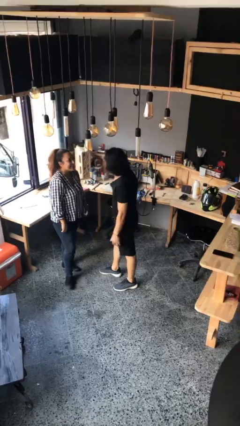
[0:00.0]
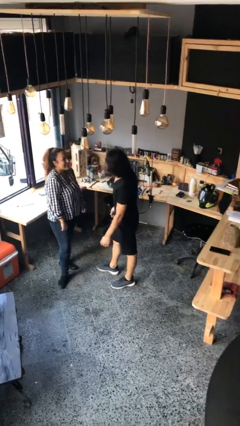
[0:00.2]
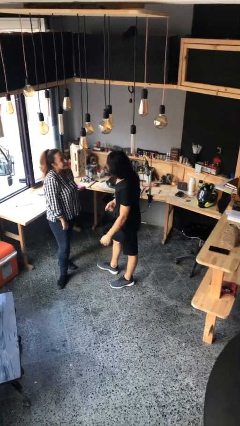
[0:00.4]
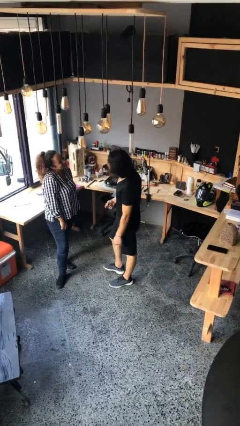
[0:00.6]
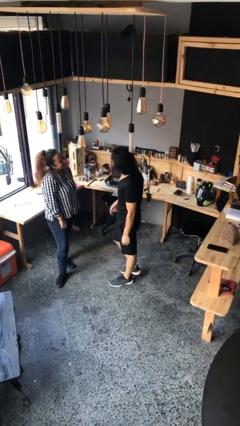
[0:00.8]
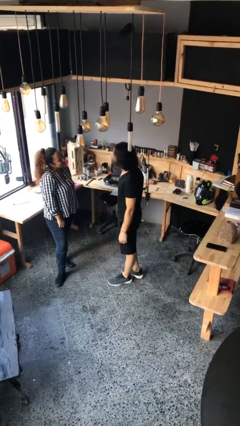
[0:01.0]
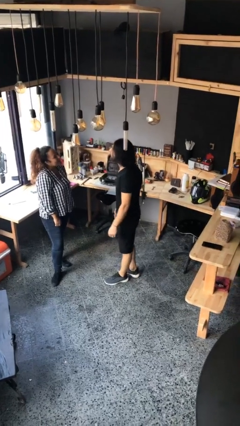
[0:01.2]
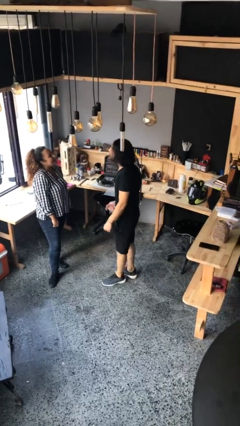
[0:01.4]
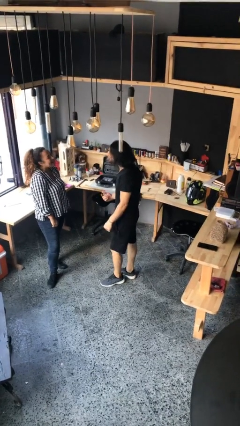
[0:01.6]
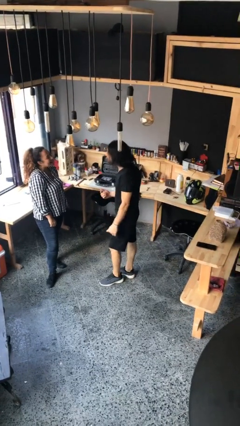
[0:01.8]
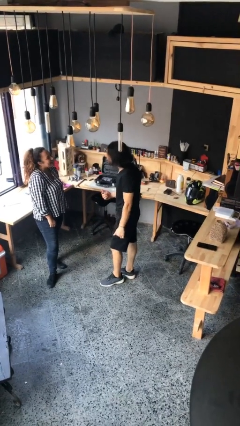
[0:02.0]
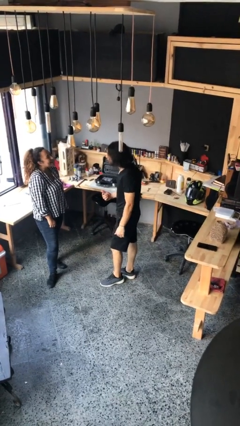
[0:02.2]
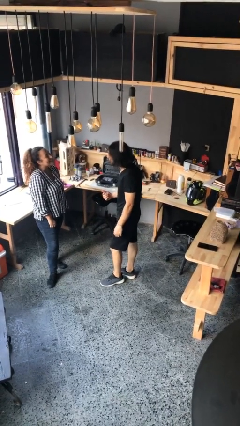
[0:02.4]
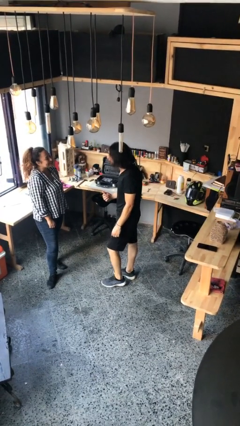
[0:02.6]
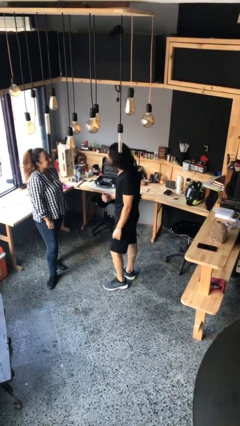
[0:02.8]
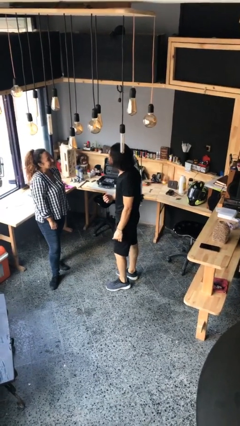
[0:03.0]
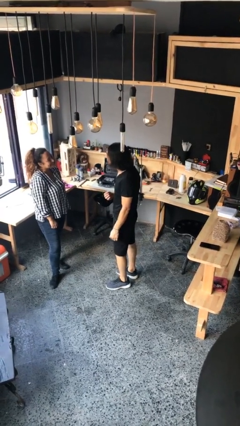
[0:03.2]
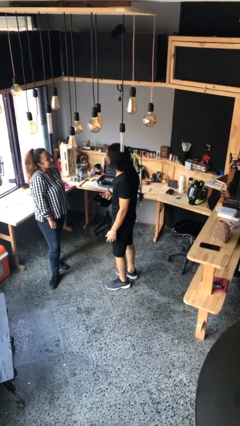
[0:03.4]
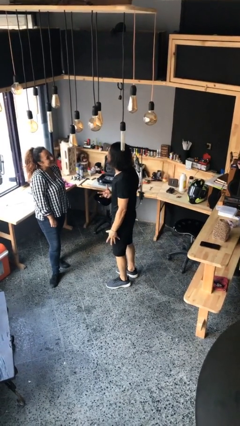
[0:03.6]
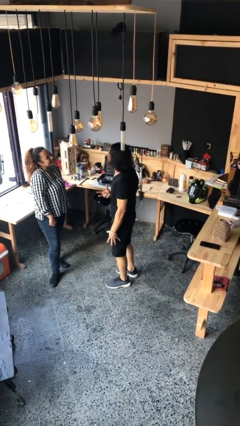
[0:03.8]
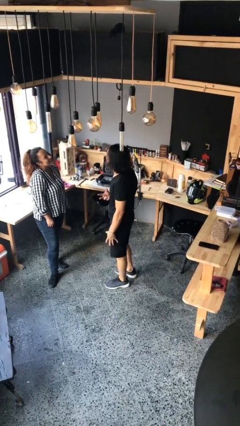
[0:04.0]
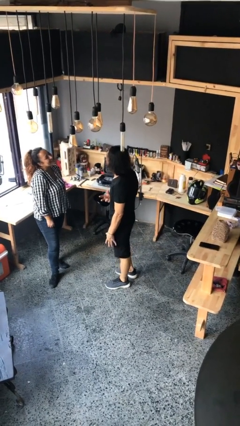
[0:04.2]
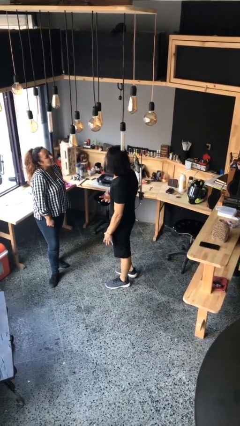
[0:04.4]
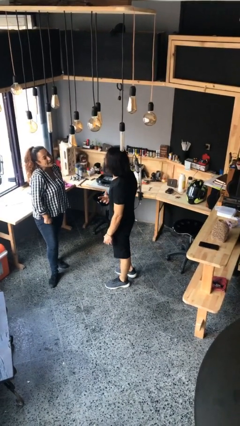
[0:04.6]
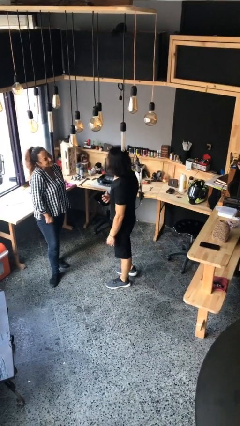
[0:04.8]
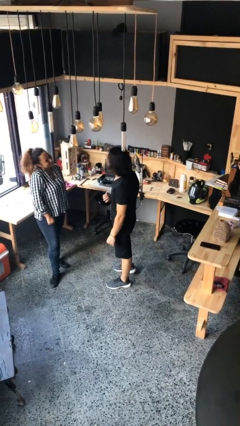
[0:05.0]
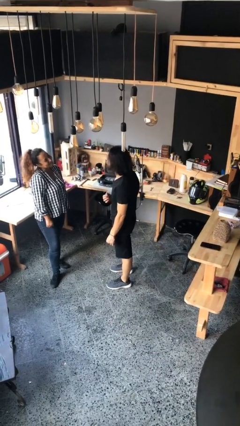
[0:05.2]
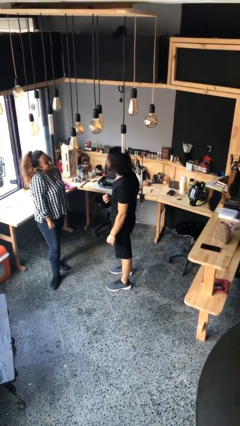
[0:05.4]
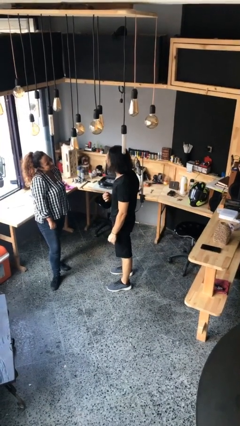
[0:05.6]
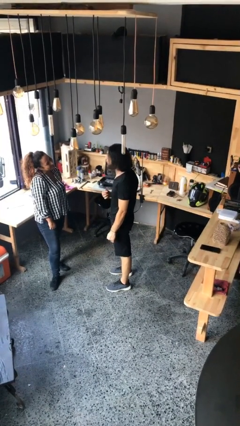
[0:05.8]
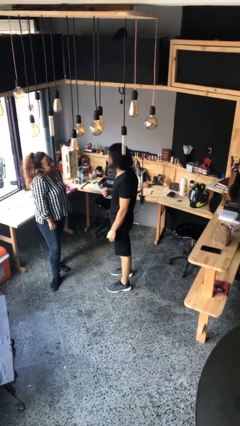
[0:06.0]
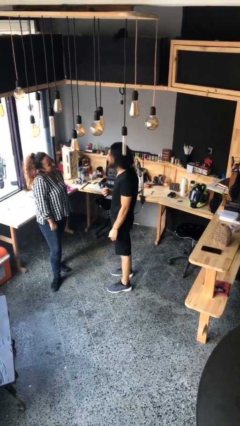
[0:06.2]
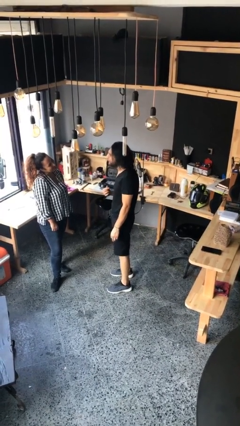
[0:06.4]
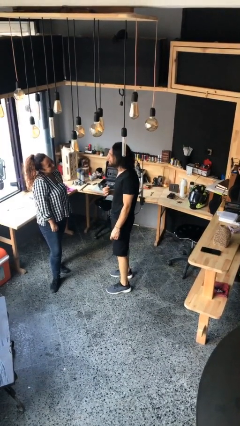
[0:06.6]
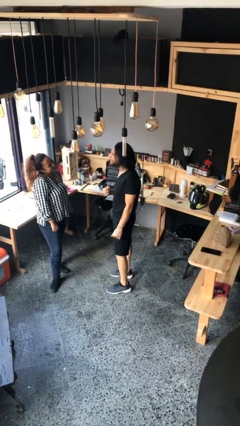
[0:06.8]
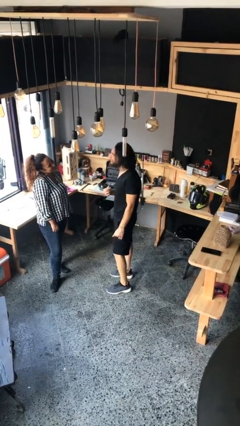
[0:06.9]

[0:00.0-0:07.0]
person talks to person

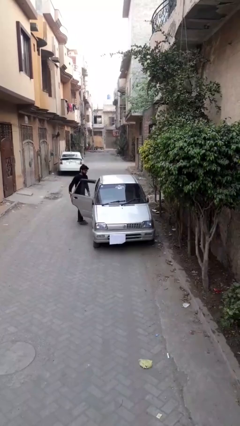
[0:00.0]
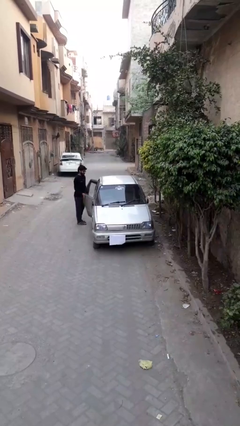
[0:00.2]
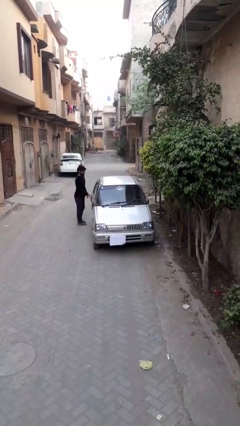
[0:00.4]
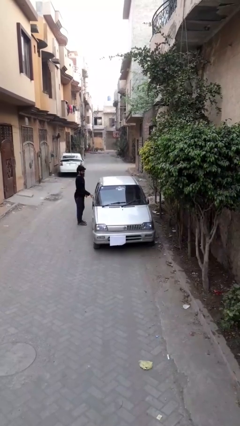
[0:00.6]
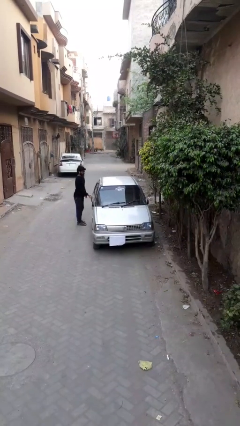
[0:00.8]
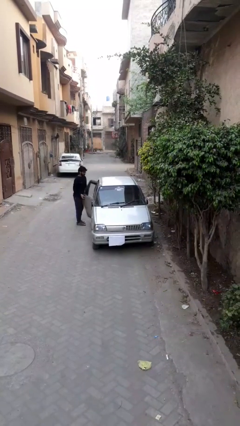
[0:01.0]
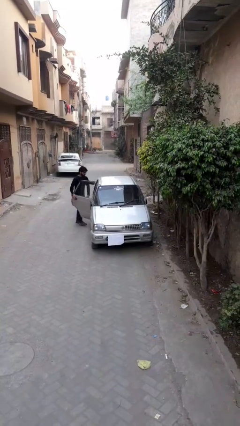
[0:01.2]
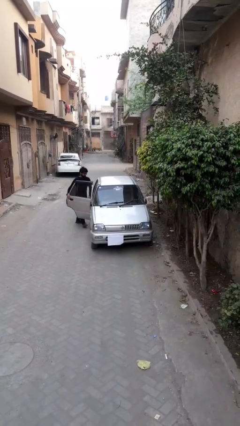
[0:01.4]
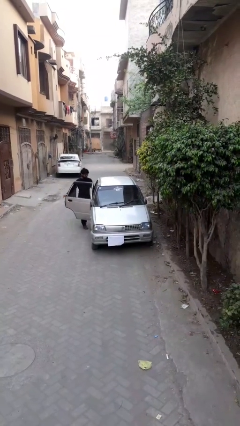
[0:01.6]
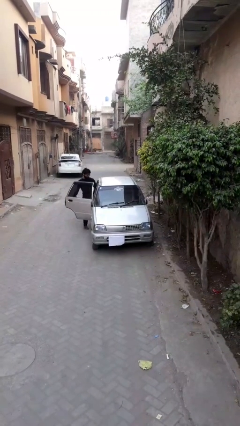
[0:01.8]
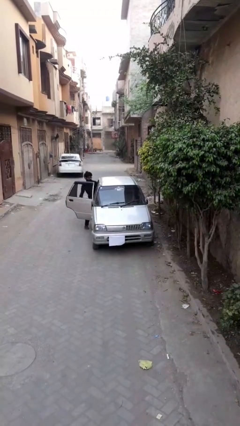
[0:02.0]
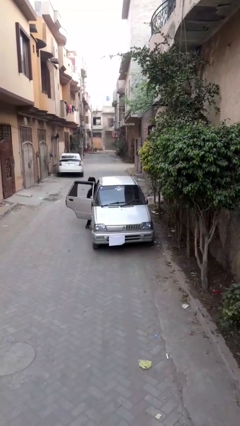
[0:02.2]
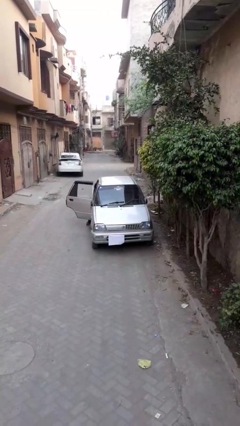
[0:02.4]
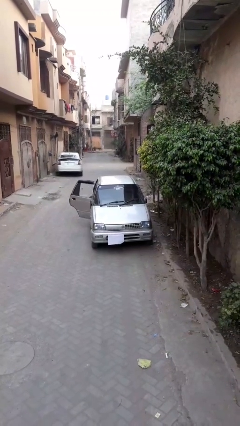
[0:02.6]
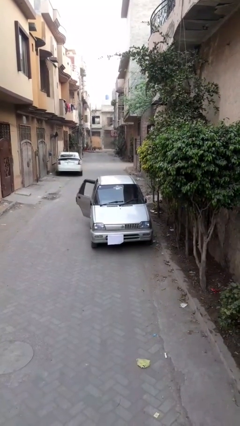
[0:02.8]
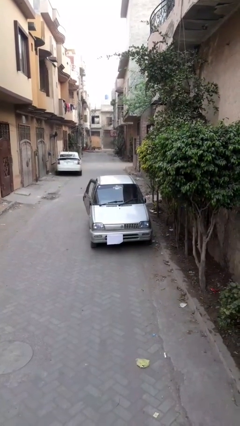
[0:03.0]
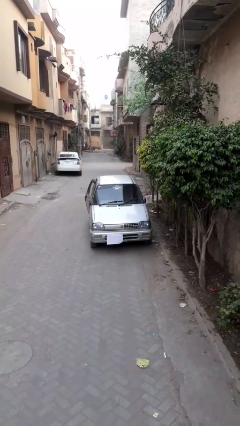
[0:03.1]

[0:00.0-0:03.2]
car picks up person

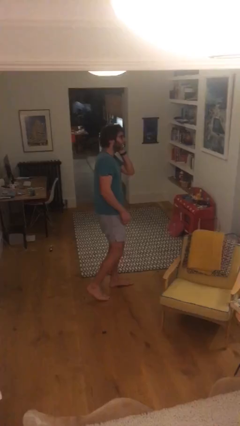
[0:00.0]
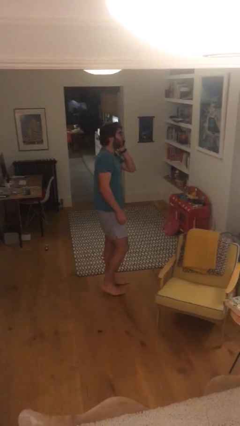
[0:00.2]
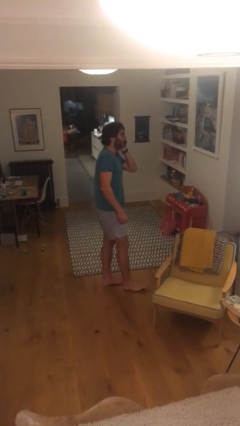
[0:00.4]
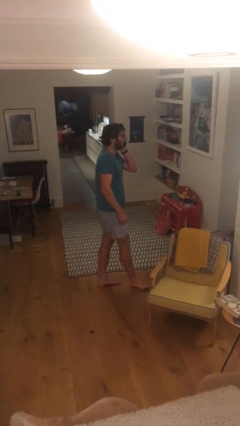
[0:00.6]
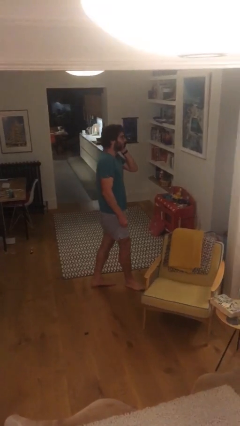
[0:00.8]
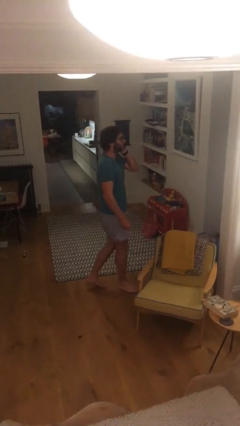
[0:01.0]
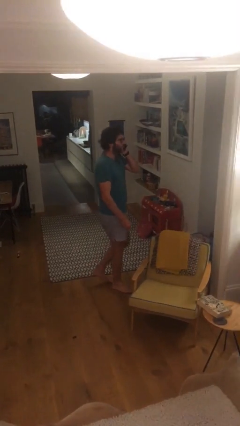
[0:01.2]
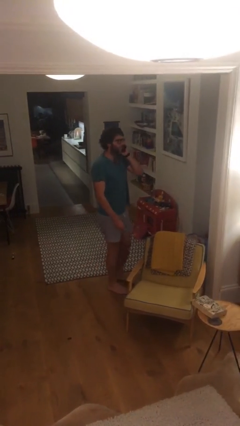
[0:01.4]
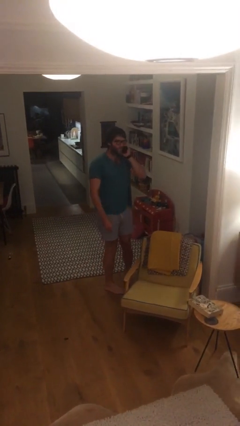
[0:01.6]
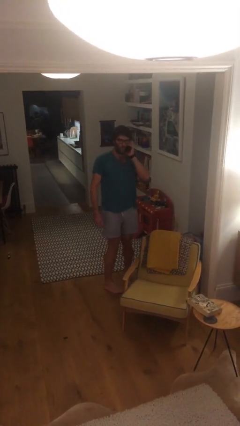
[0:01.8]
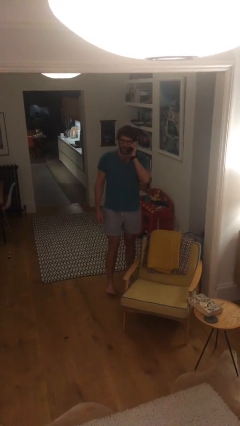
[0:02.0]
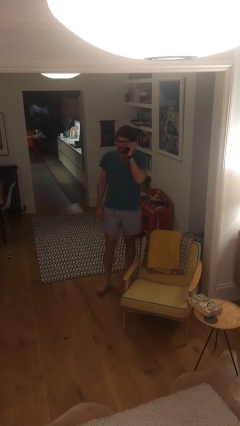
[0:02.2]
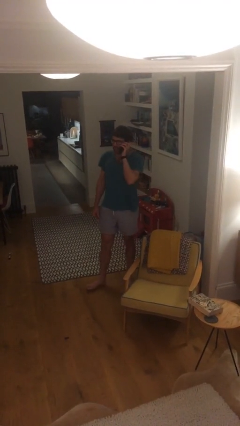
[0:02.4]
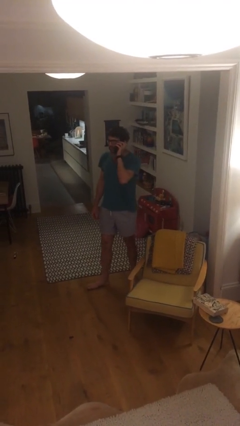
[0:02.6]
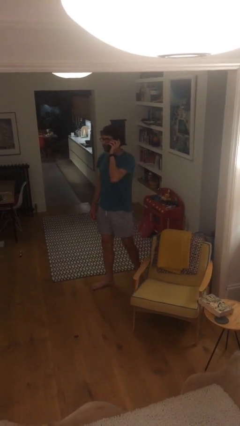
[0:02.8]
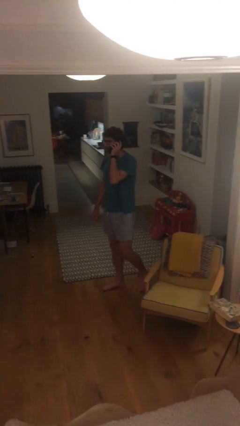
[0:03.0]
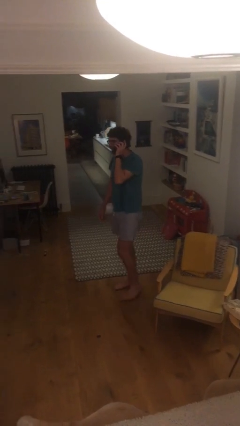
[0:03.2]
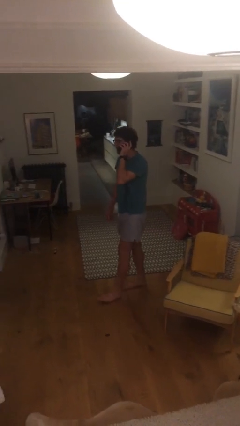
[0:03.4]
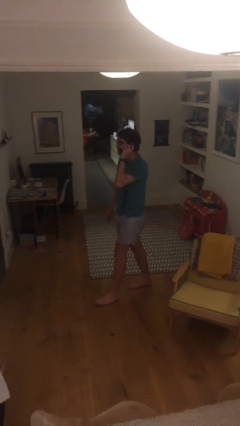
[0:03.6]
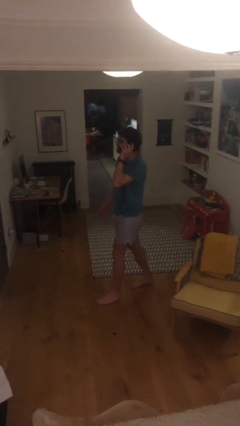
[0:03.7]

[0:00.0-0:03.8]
person talks on phone

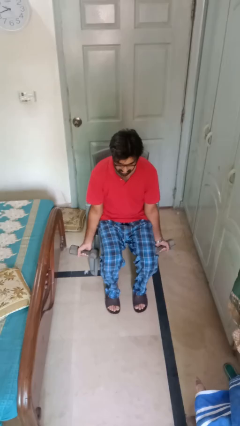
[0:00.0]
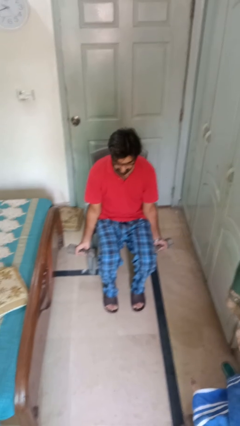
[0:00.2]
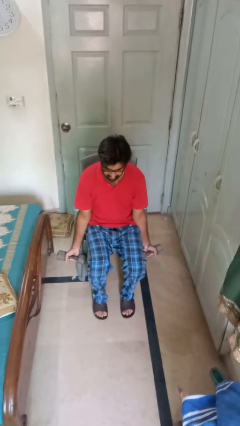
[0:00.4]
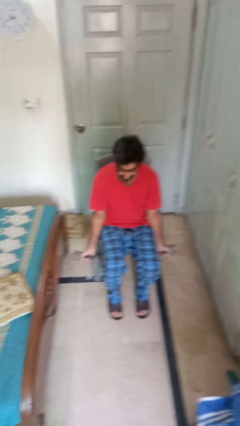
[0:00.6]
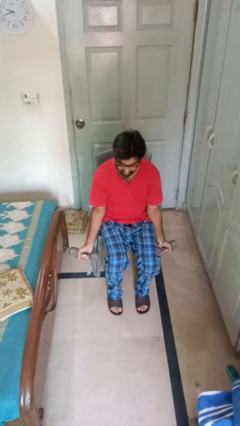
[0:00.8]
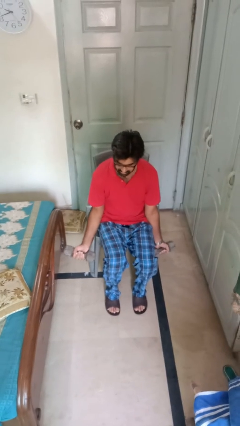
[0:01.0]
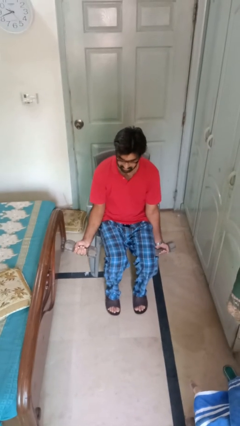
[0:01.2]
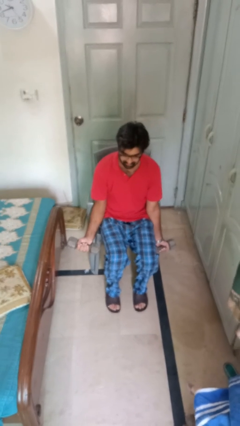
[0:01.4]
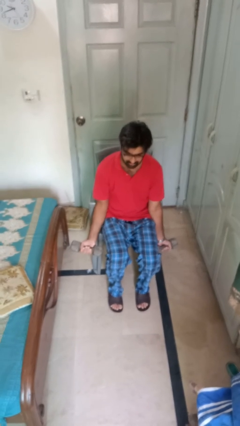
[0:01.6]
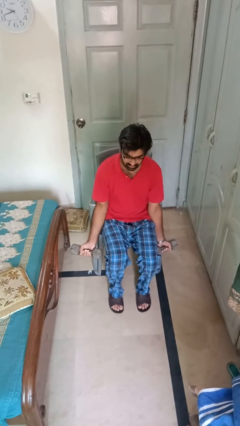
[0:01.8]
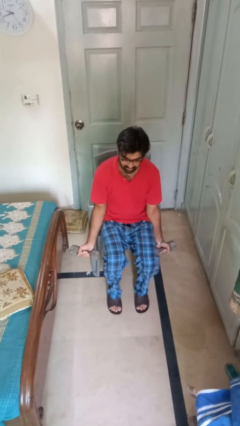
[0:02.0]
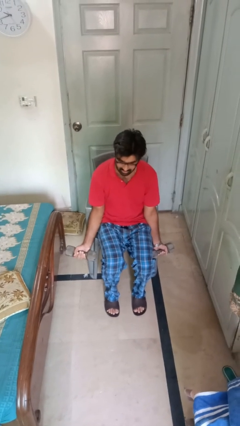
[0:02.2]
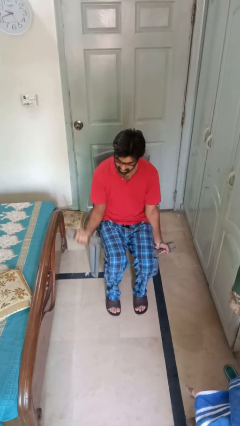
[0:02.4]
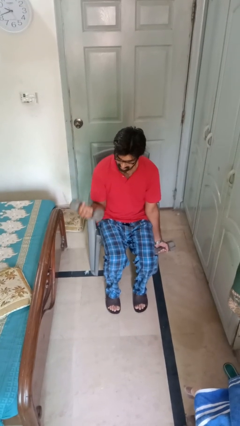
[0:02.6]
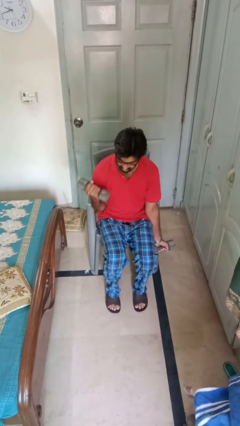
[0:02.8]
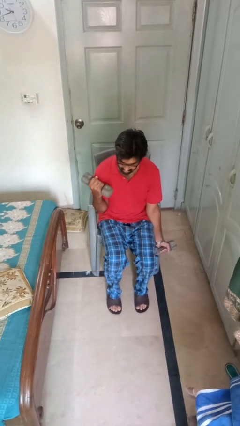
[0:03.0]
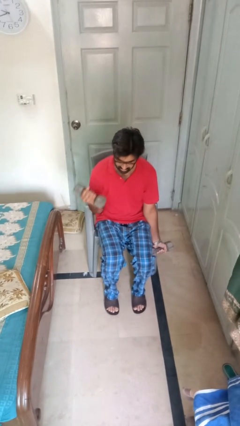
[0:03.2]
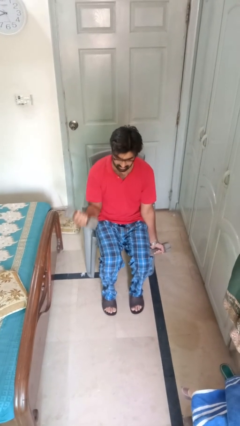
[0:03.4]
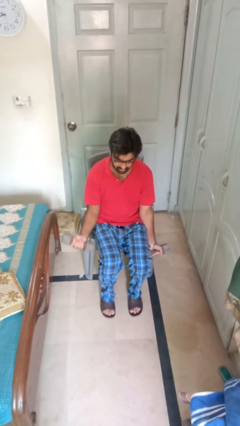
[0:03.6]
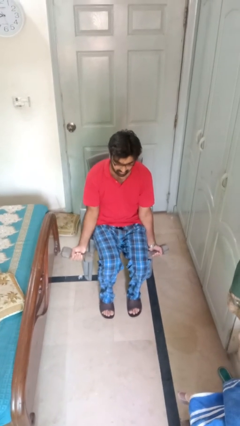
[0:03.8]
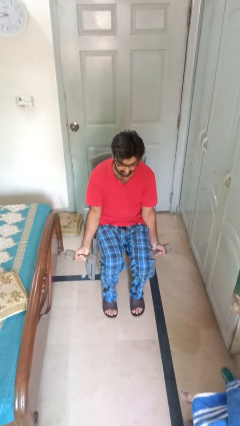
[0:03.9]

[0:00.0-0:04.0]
person lifts dumbbells
